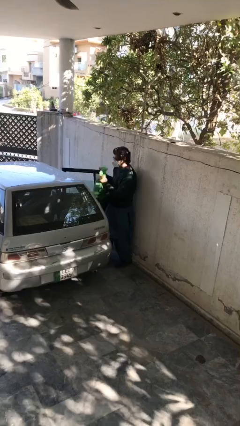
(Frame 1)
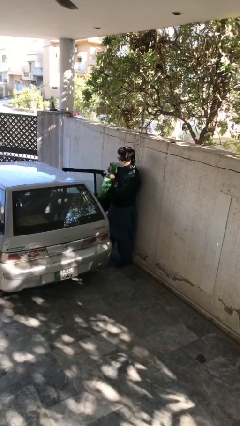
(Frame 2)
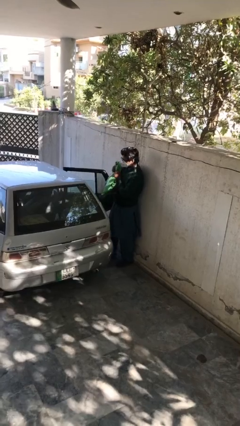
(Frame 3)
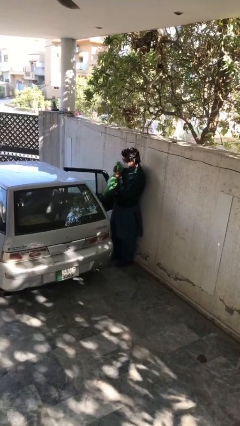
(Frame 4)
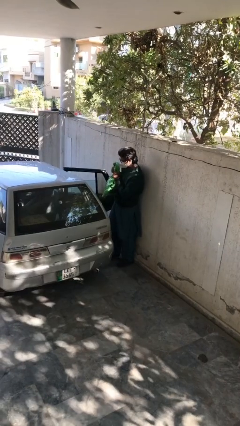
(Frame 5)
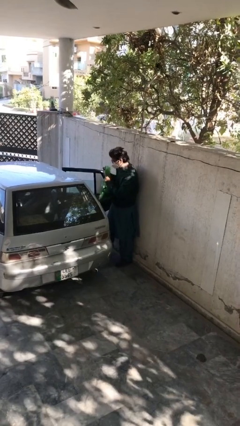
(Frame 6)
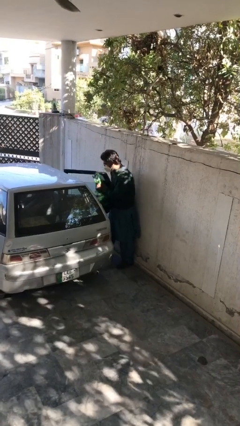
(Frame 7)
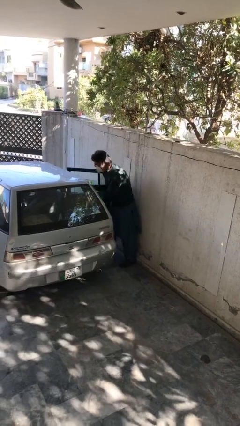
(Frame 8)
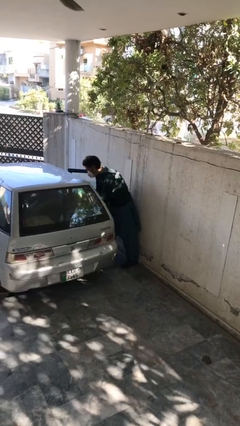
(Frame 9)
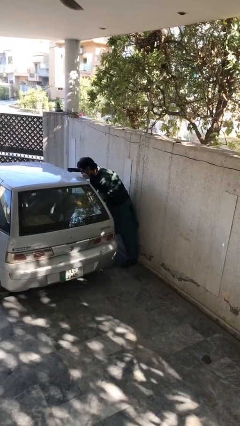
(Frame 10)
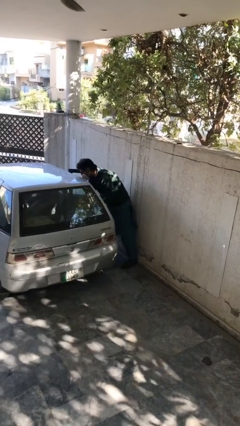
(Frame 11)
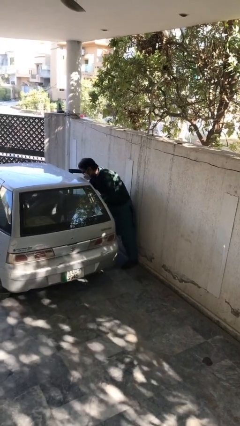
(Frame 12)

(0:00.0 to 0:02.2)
person loads car

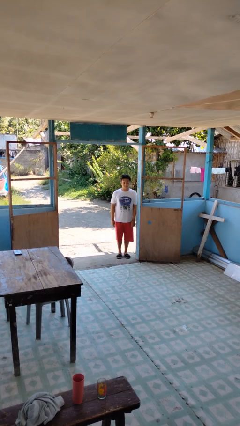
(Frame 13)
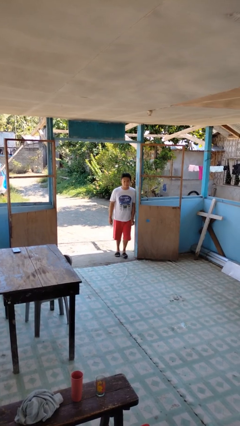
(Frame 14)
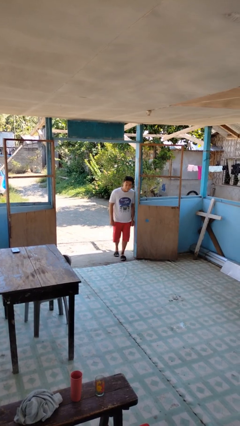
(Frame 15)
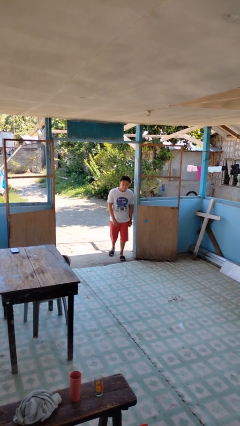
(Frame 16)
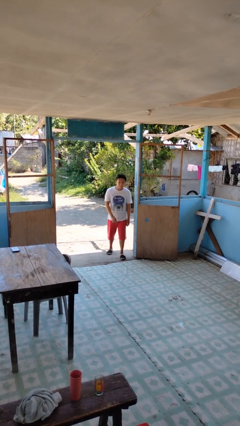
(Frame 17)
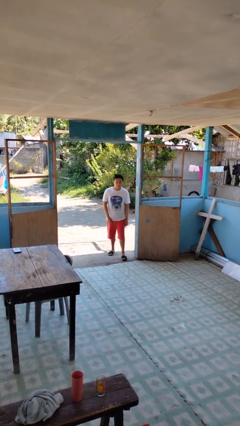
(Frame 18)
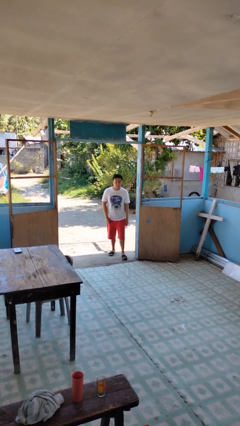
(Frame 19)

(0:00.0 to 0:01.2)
person bumps into wall

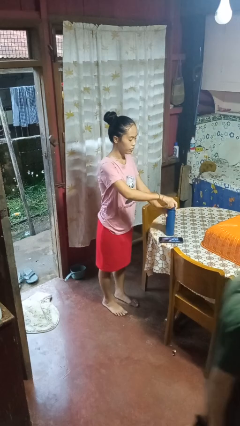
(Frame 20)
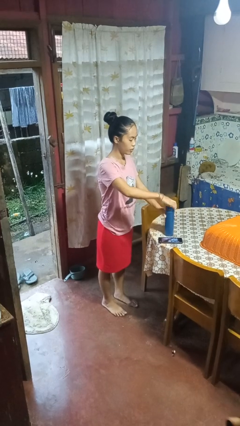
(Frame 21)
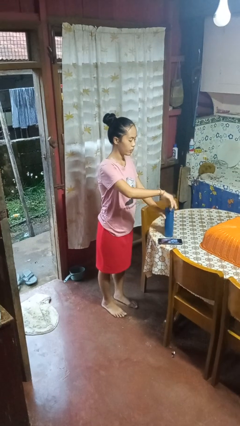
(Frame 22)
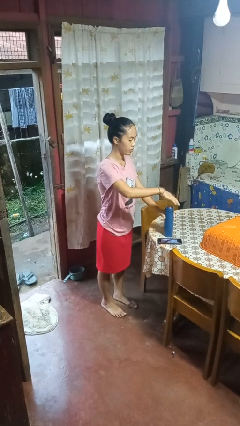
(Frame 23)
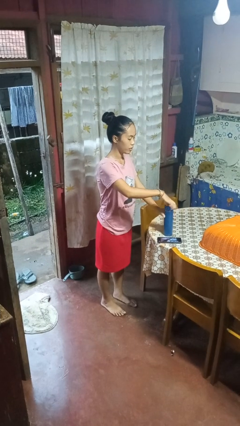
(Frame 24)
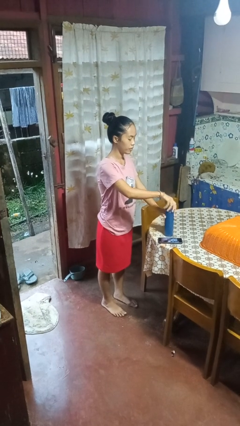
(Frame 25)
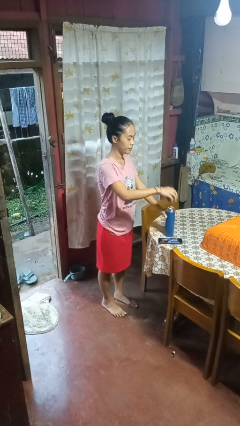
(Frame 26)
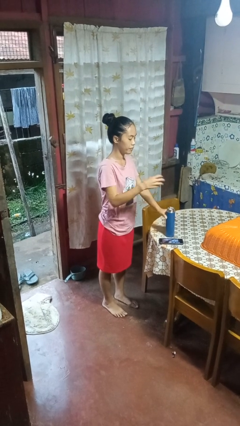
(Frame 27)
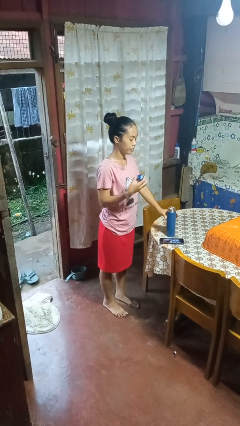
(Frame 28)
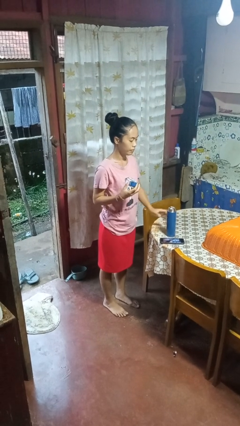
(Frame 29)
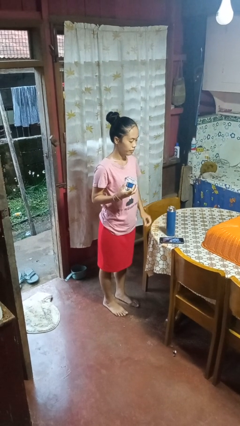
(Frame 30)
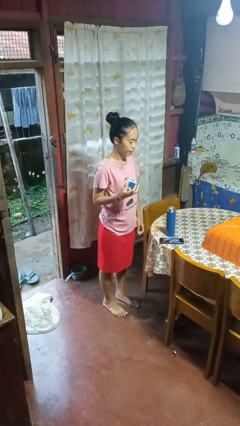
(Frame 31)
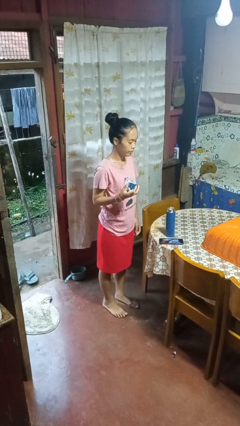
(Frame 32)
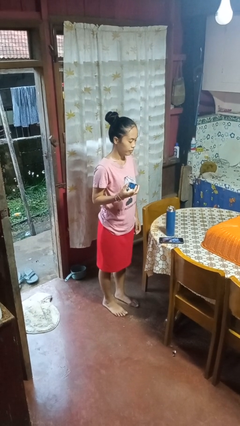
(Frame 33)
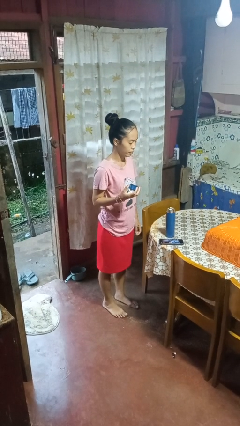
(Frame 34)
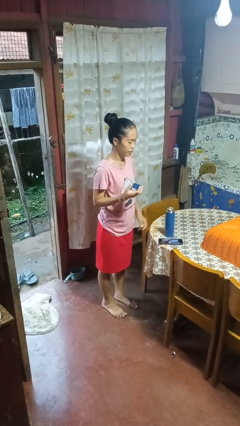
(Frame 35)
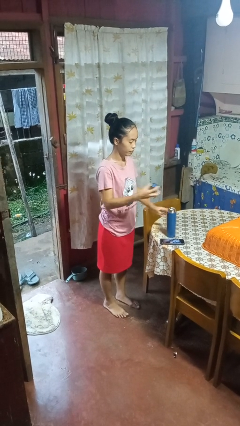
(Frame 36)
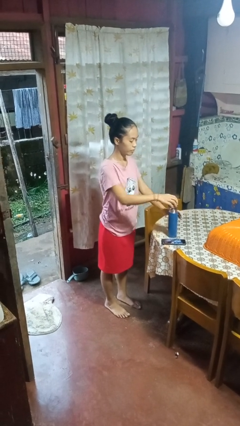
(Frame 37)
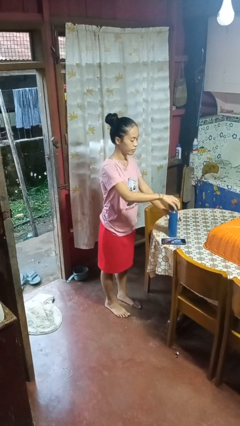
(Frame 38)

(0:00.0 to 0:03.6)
person opens jar

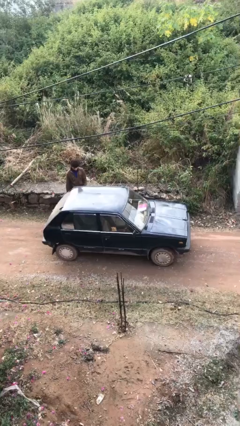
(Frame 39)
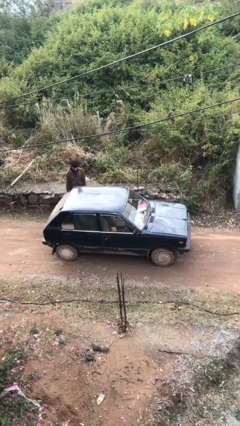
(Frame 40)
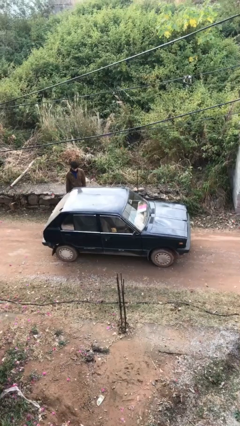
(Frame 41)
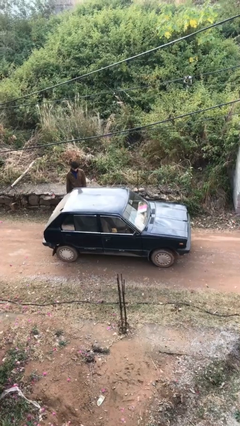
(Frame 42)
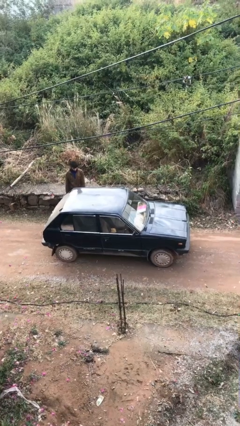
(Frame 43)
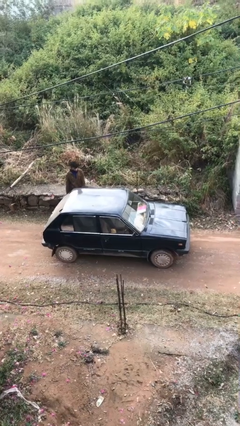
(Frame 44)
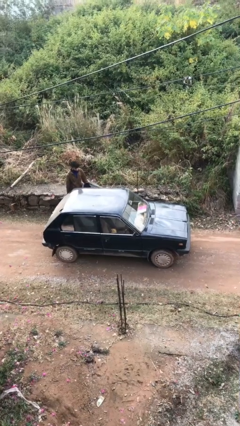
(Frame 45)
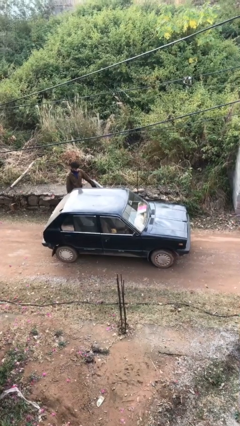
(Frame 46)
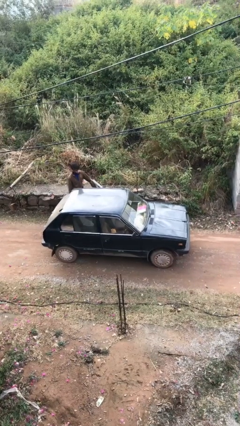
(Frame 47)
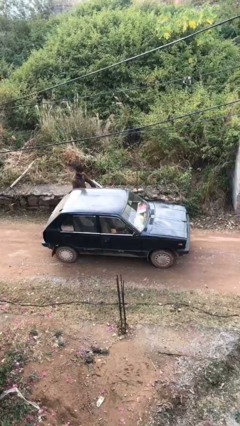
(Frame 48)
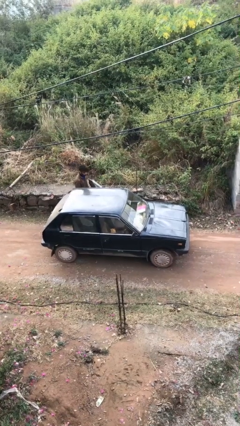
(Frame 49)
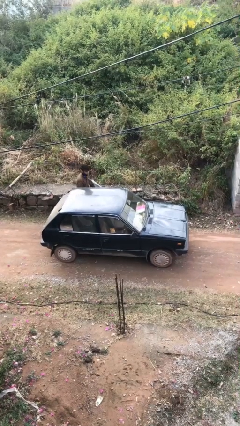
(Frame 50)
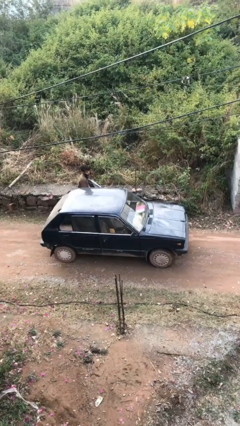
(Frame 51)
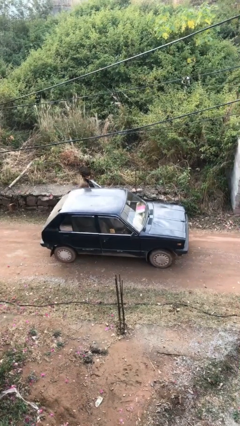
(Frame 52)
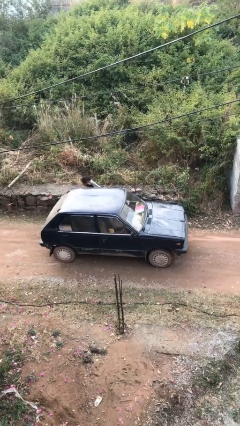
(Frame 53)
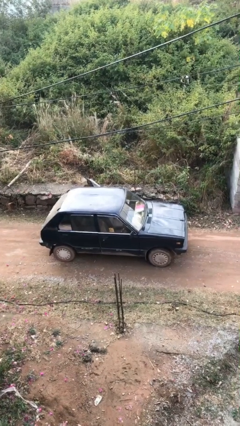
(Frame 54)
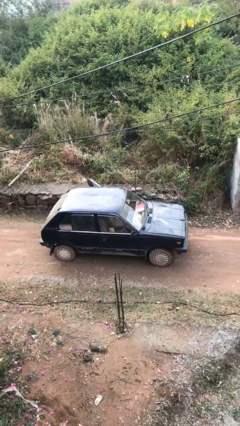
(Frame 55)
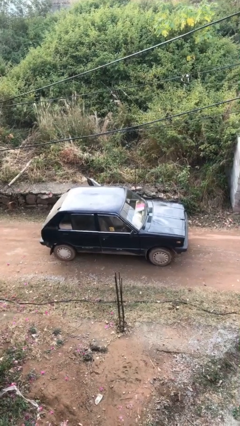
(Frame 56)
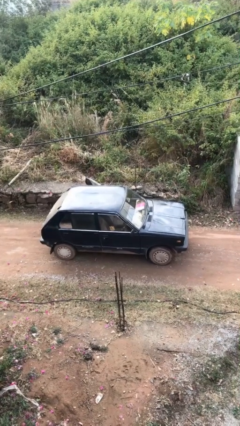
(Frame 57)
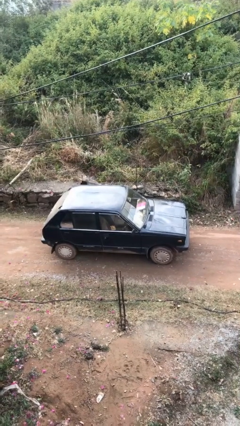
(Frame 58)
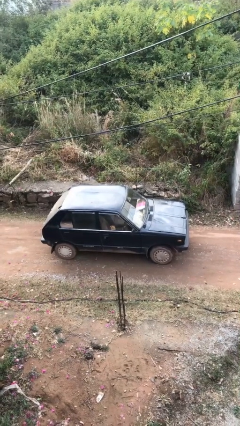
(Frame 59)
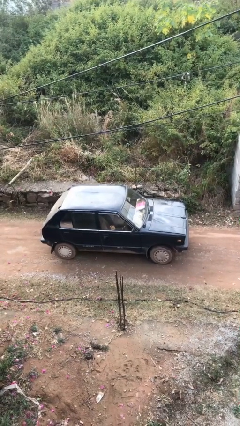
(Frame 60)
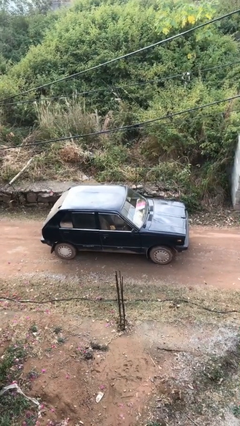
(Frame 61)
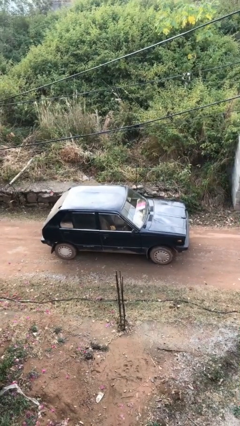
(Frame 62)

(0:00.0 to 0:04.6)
car picks up person

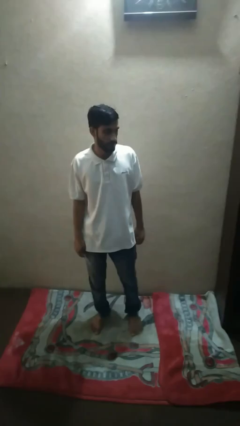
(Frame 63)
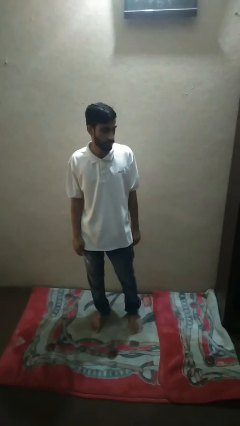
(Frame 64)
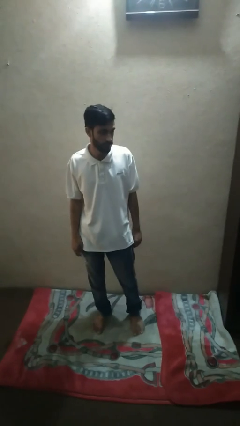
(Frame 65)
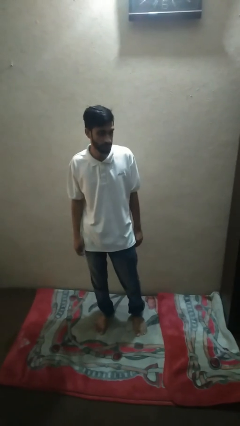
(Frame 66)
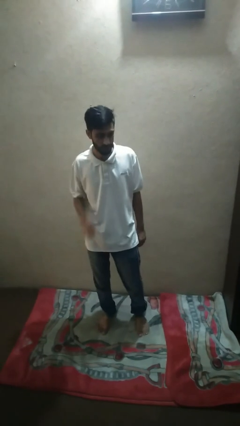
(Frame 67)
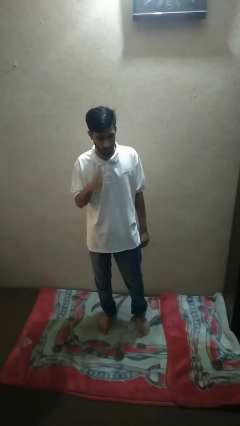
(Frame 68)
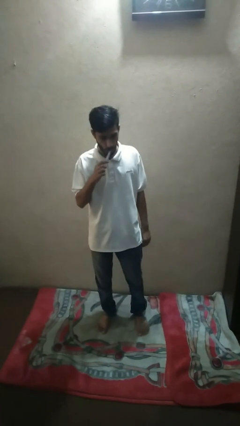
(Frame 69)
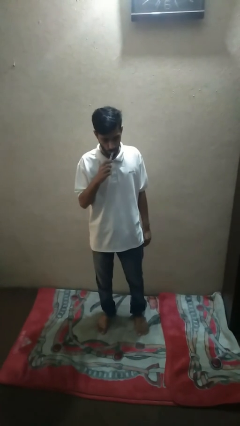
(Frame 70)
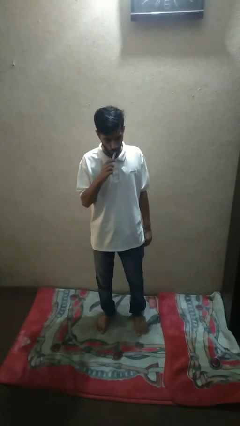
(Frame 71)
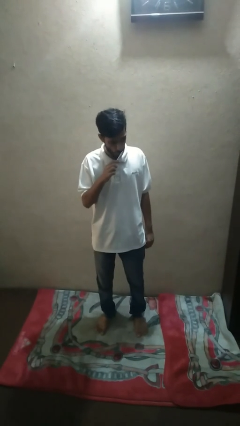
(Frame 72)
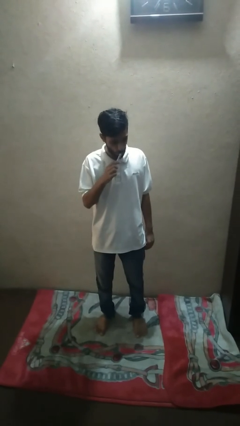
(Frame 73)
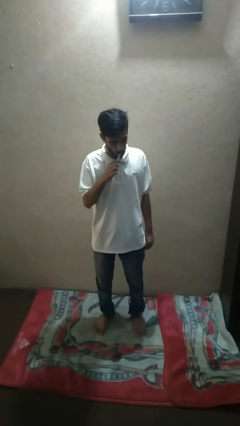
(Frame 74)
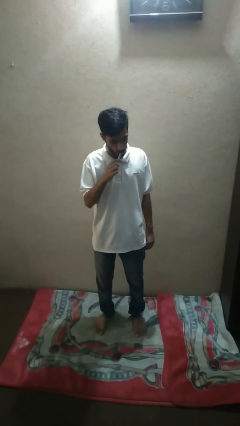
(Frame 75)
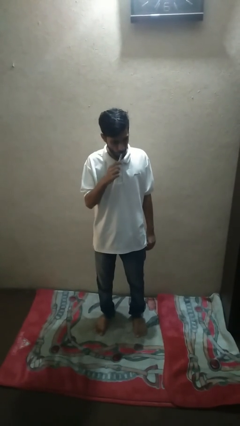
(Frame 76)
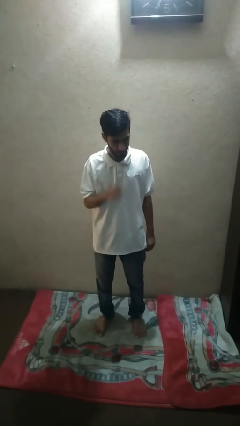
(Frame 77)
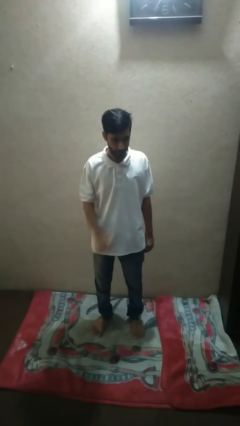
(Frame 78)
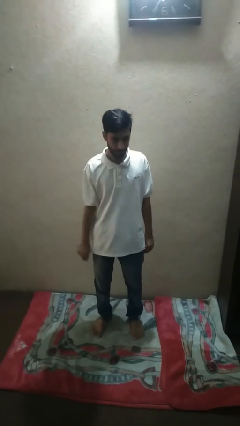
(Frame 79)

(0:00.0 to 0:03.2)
person brushes teeth

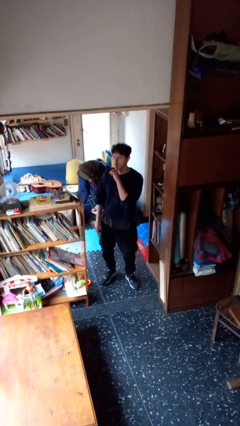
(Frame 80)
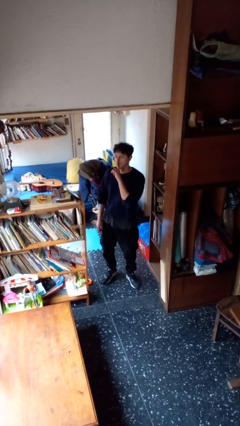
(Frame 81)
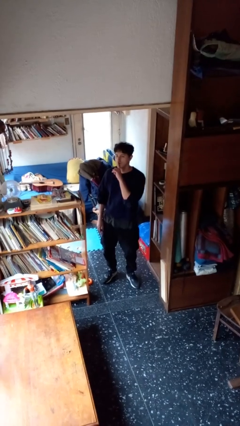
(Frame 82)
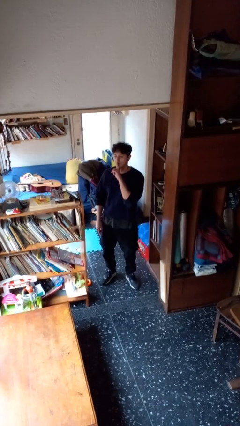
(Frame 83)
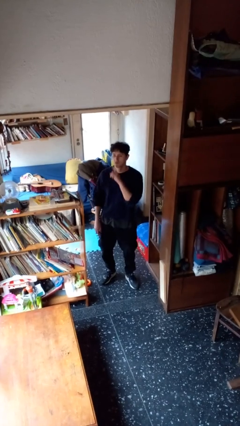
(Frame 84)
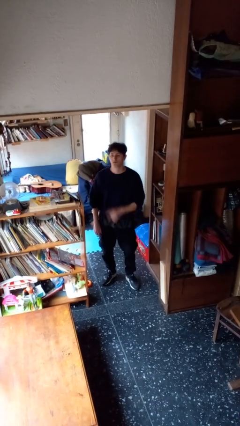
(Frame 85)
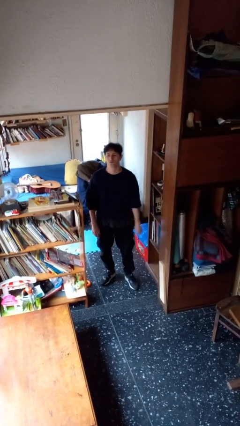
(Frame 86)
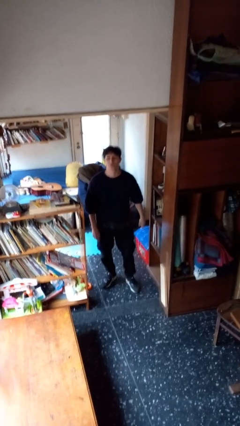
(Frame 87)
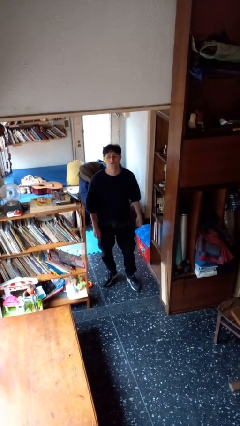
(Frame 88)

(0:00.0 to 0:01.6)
person gestures be quiet

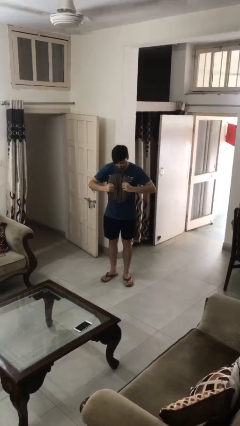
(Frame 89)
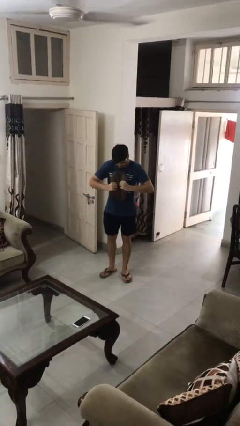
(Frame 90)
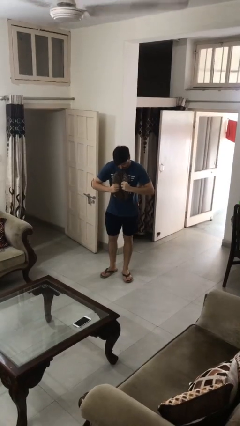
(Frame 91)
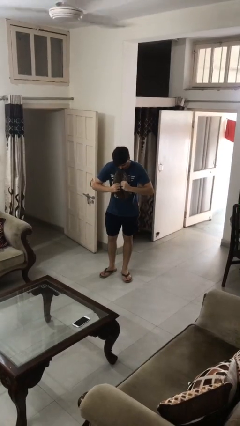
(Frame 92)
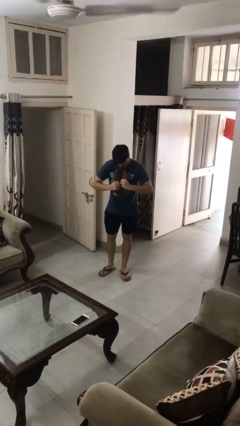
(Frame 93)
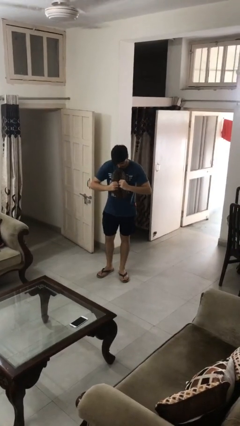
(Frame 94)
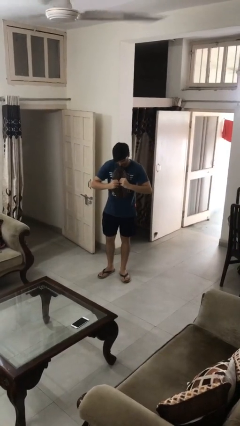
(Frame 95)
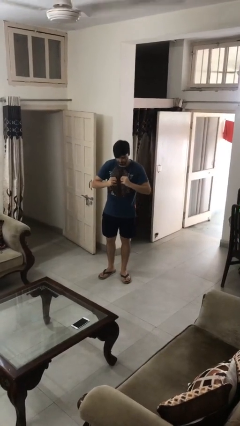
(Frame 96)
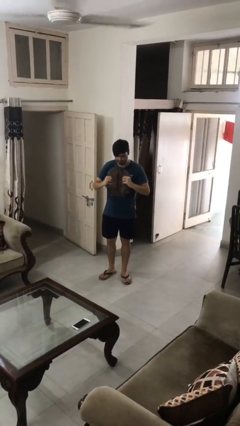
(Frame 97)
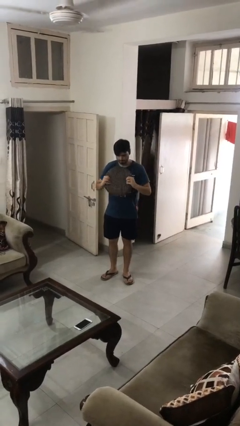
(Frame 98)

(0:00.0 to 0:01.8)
person squeezes object
